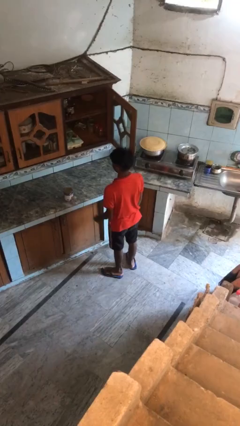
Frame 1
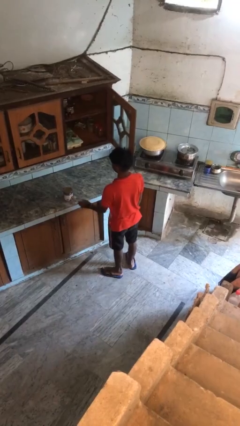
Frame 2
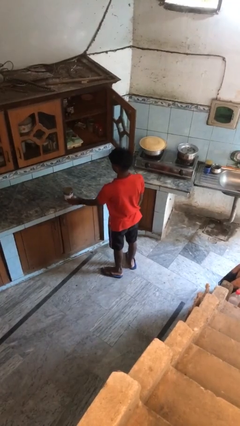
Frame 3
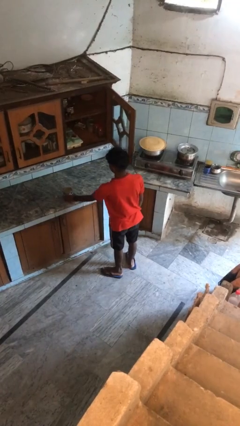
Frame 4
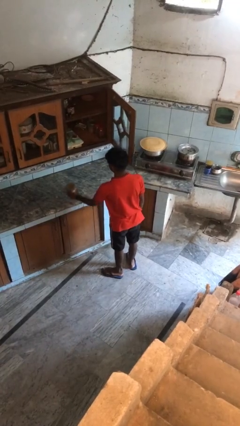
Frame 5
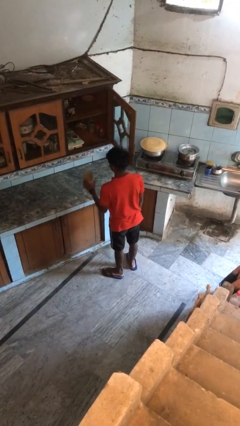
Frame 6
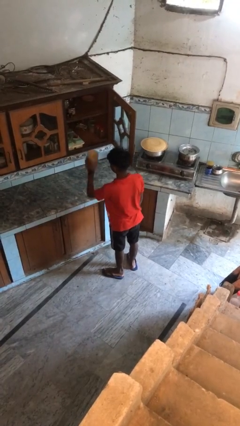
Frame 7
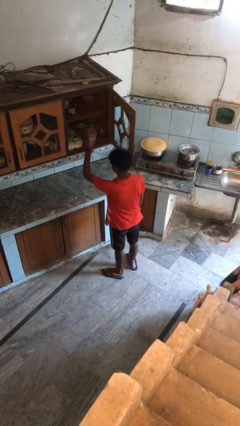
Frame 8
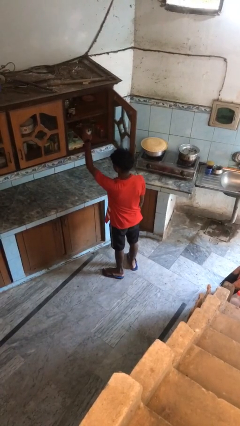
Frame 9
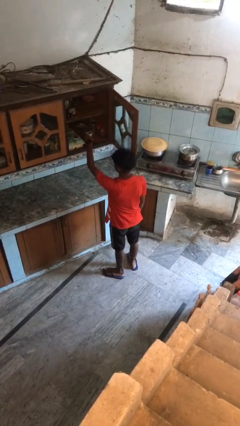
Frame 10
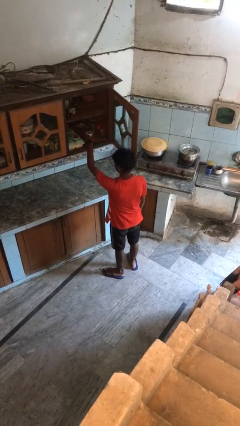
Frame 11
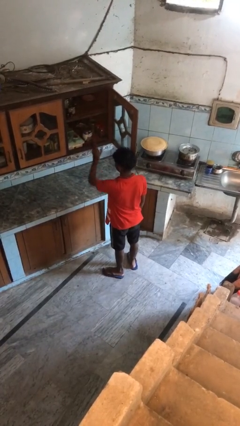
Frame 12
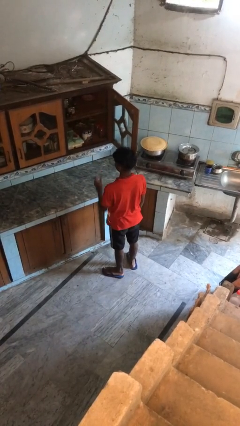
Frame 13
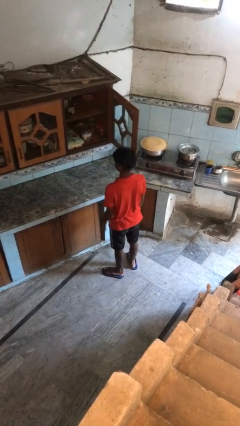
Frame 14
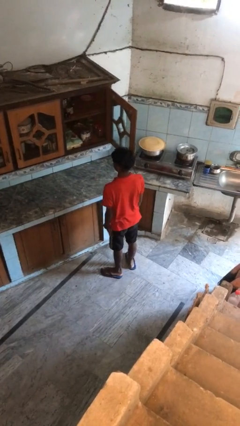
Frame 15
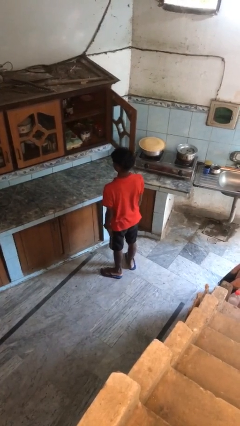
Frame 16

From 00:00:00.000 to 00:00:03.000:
person puts object in cabinet

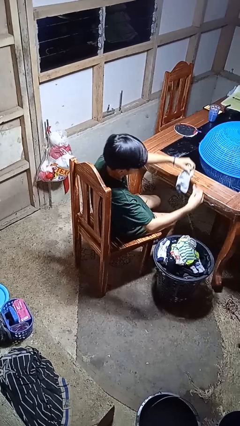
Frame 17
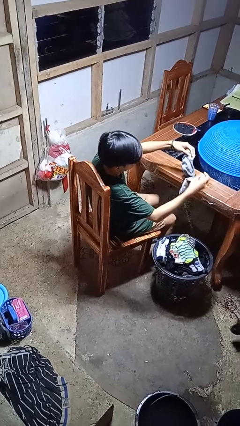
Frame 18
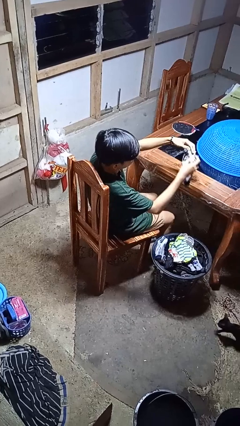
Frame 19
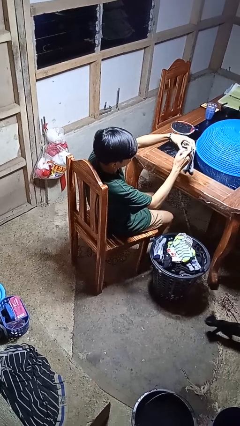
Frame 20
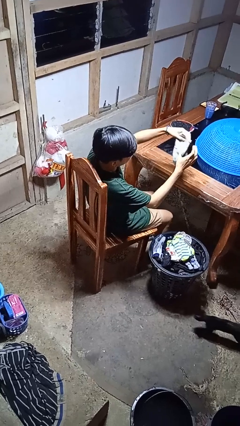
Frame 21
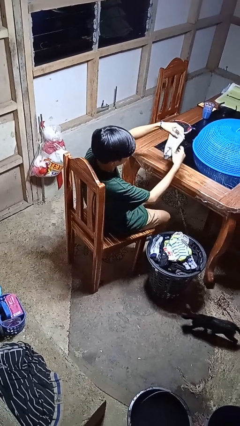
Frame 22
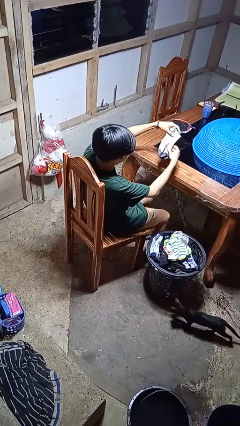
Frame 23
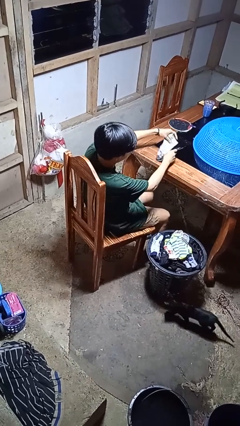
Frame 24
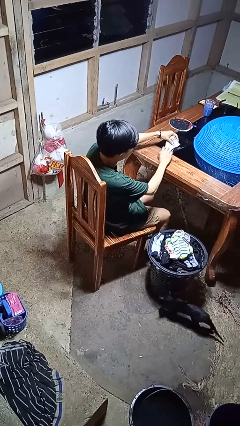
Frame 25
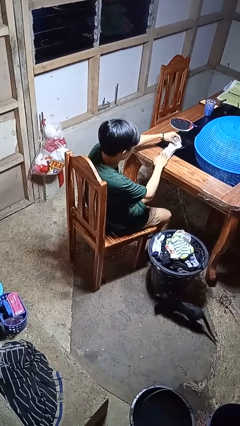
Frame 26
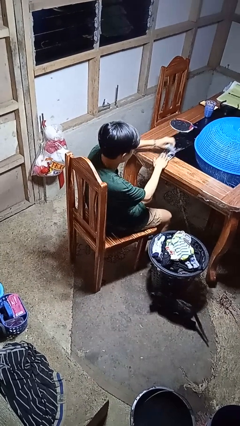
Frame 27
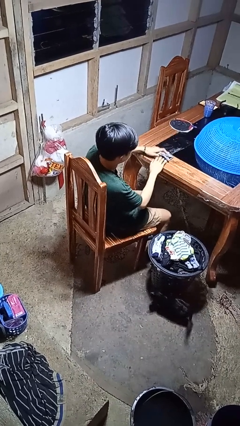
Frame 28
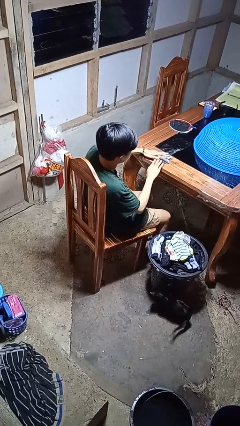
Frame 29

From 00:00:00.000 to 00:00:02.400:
person folds socks

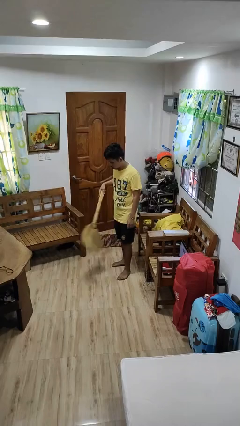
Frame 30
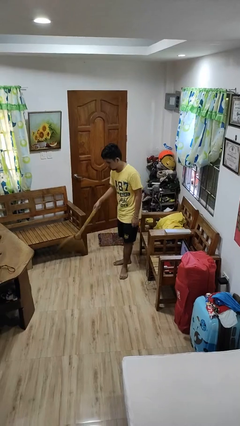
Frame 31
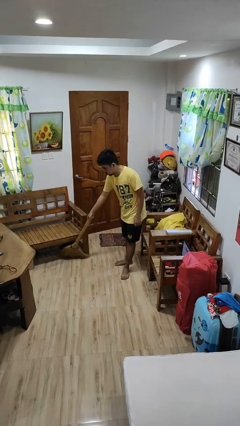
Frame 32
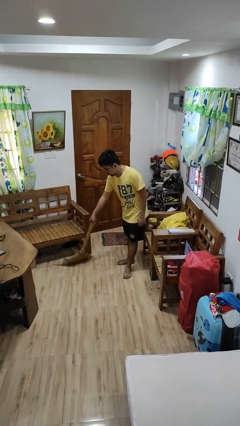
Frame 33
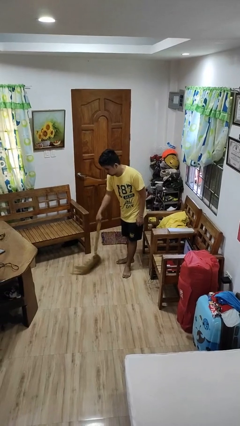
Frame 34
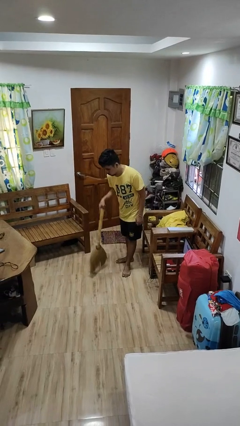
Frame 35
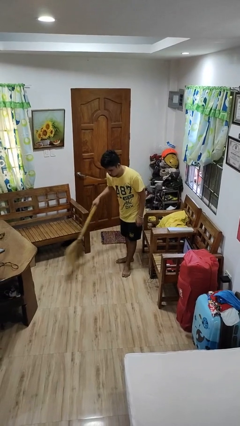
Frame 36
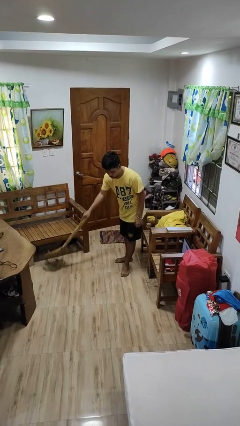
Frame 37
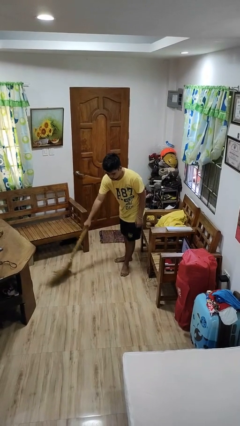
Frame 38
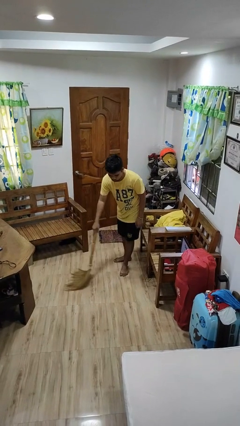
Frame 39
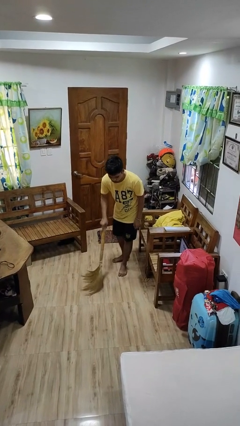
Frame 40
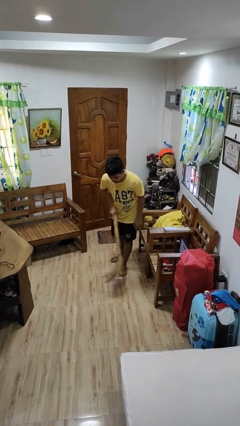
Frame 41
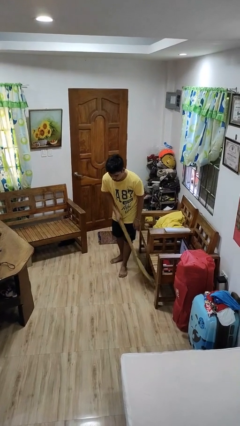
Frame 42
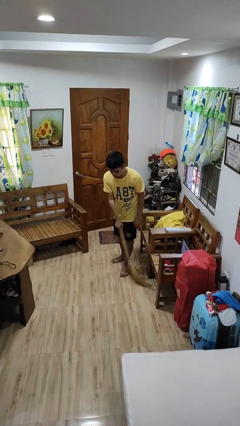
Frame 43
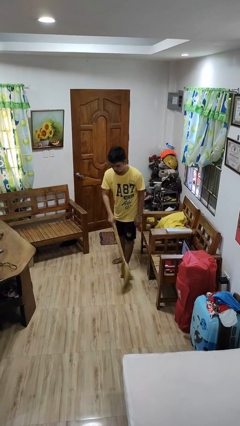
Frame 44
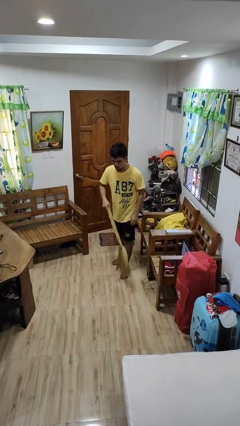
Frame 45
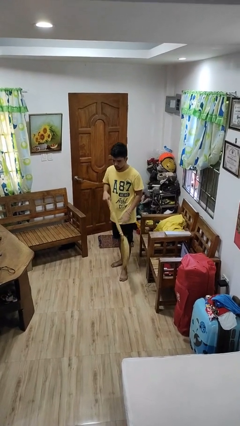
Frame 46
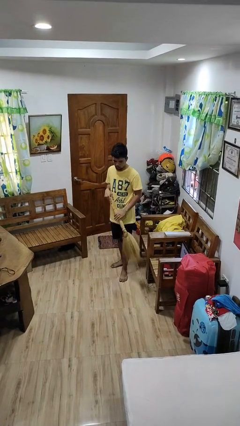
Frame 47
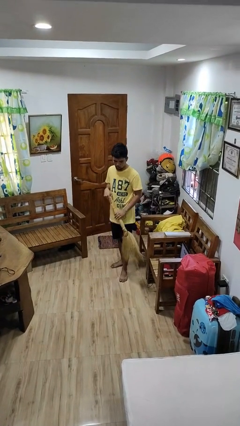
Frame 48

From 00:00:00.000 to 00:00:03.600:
person sweeps floor

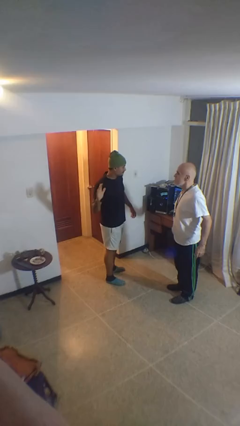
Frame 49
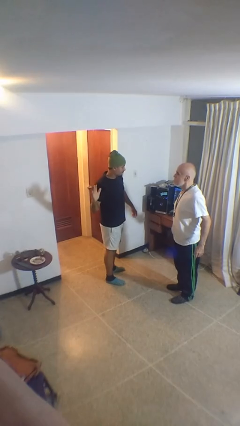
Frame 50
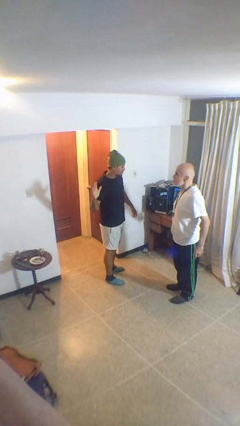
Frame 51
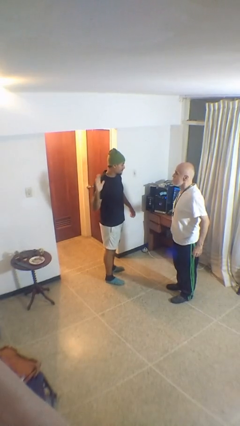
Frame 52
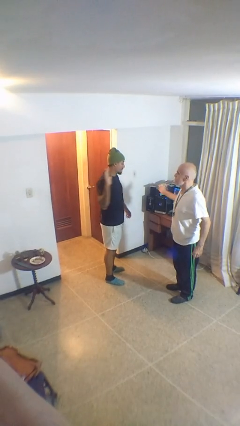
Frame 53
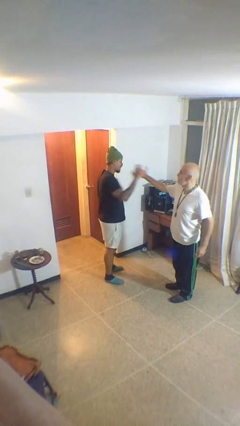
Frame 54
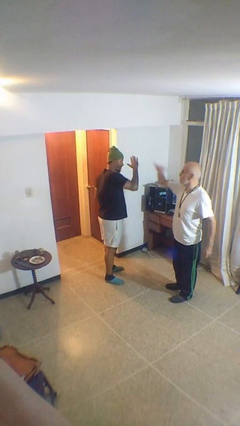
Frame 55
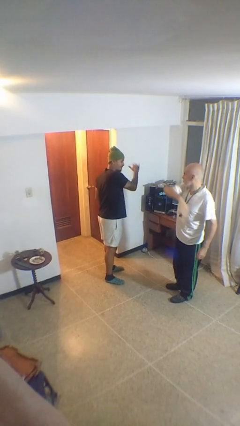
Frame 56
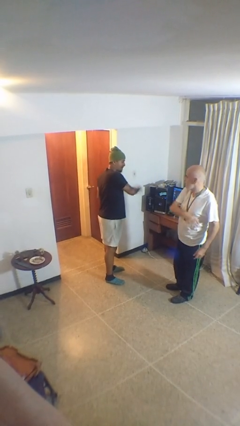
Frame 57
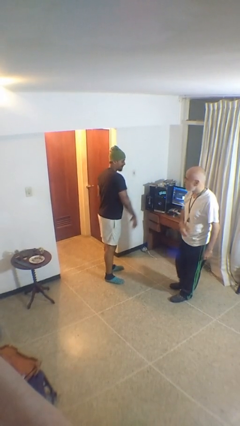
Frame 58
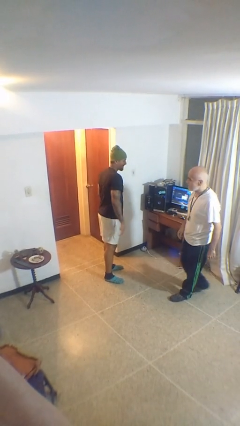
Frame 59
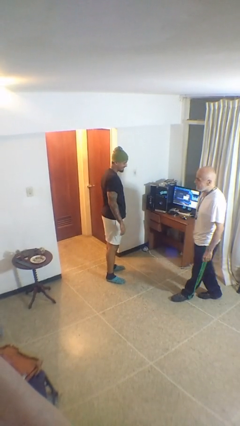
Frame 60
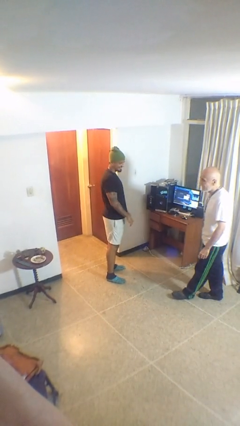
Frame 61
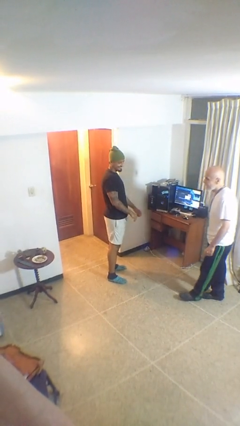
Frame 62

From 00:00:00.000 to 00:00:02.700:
person highfives hand

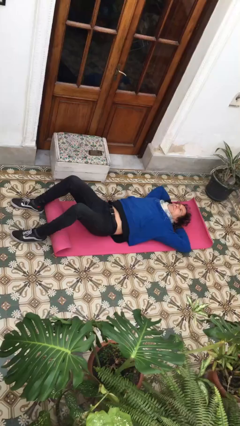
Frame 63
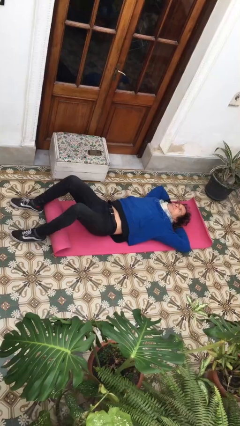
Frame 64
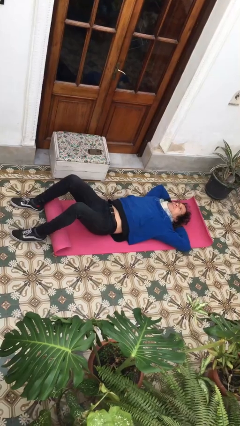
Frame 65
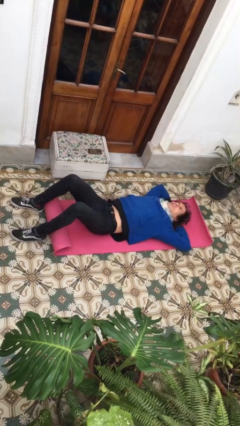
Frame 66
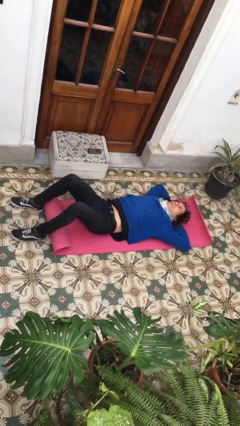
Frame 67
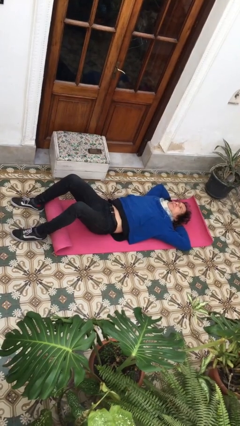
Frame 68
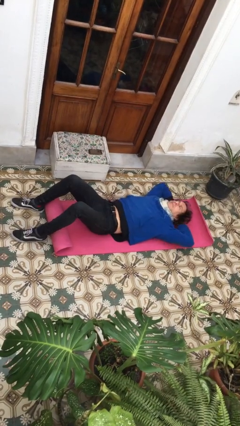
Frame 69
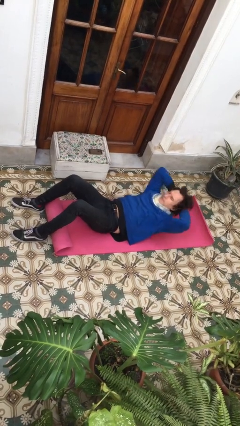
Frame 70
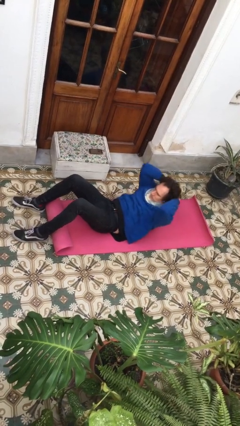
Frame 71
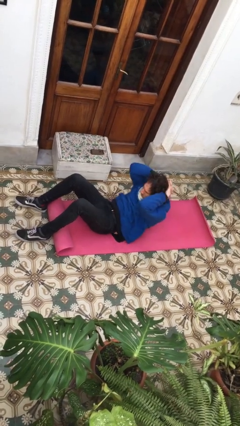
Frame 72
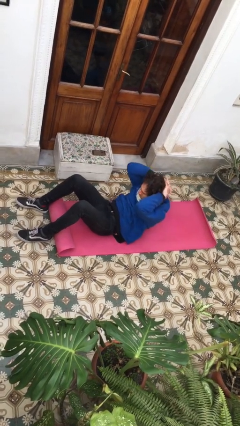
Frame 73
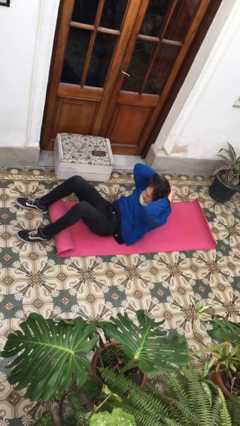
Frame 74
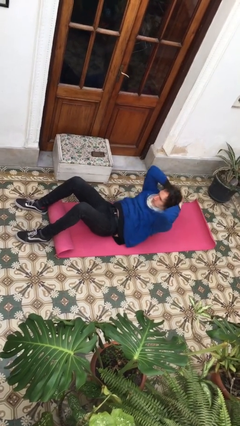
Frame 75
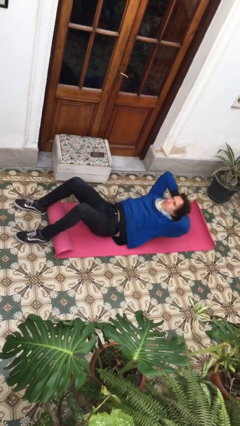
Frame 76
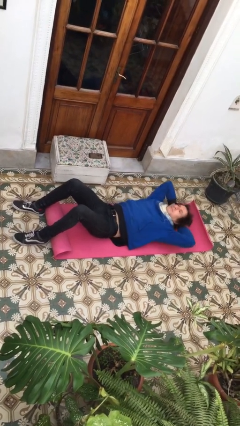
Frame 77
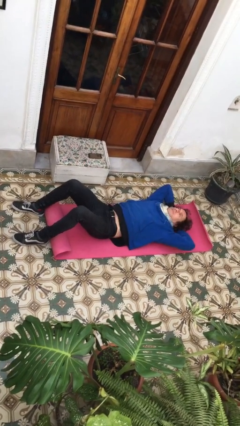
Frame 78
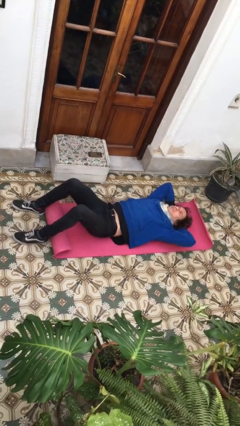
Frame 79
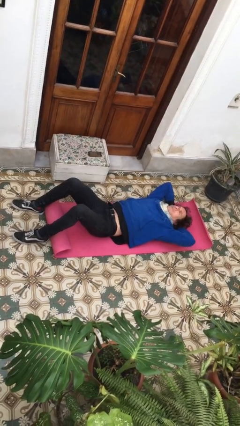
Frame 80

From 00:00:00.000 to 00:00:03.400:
person exercises with situp

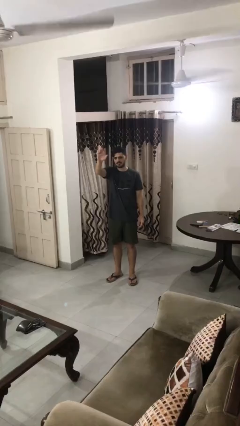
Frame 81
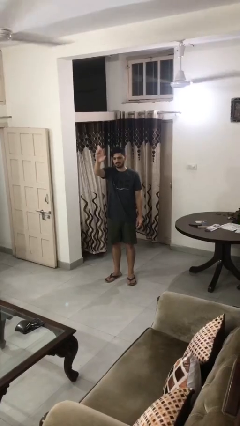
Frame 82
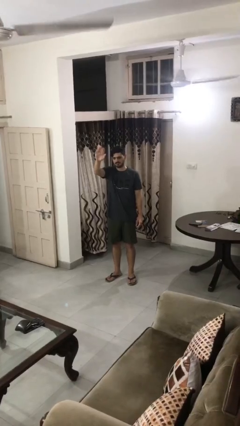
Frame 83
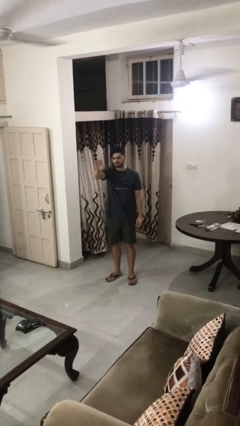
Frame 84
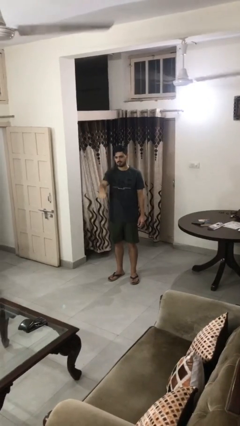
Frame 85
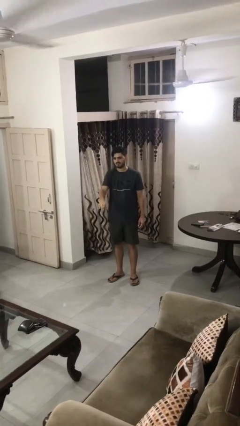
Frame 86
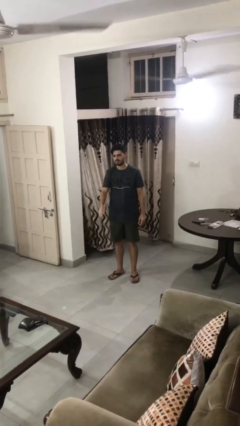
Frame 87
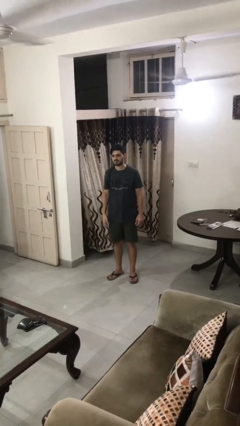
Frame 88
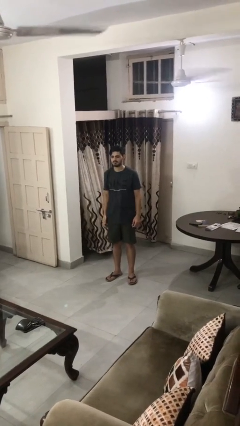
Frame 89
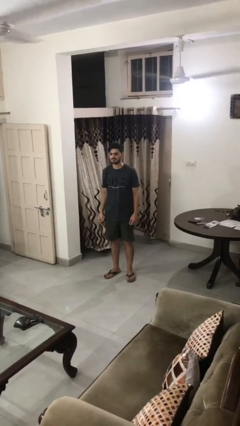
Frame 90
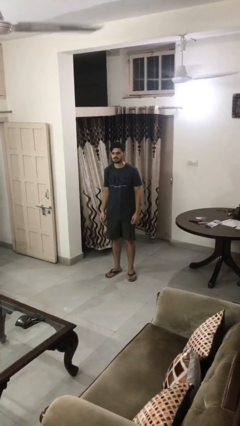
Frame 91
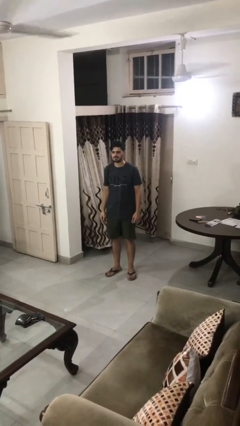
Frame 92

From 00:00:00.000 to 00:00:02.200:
person gestures swipe down

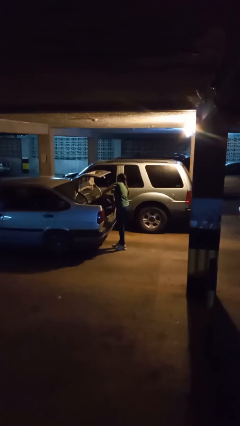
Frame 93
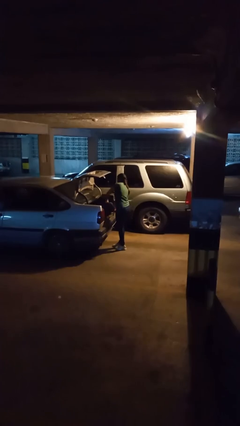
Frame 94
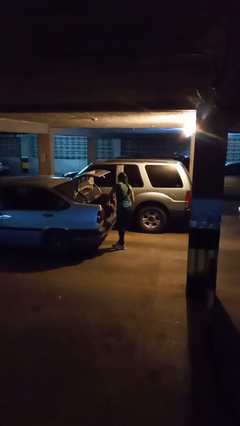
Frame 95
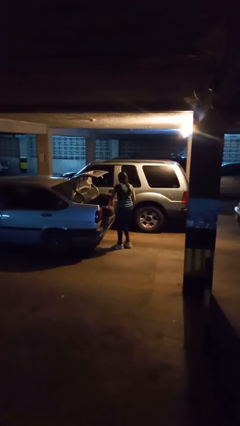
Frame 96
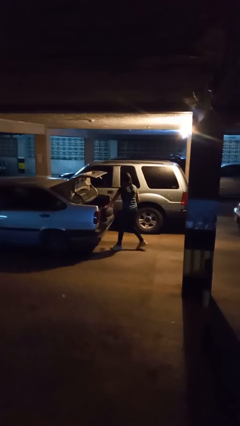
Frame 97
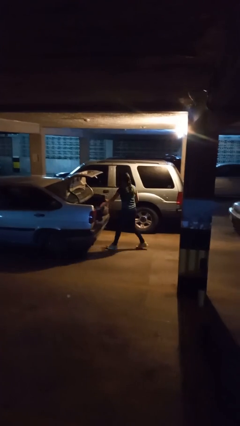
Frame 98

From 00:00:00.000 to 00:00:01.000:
person loads car
